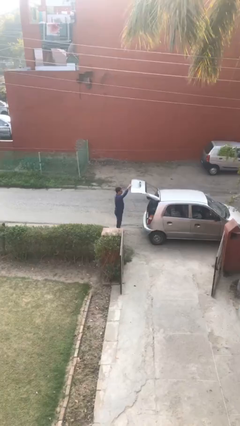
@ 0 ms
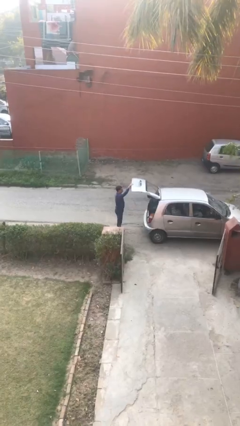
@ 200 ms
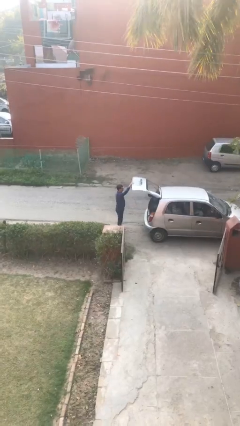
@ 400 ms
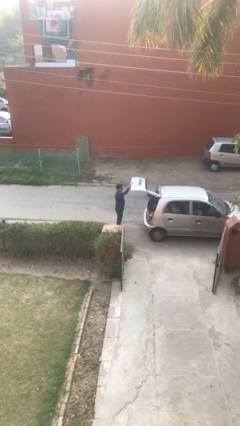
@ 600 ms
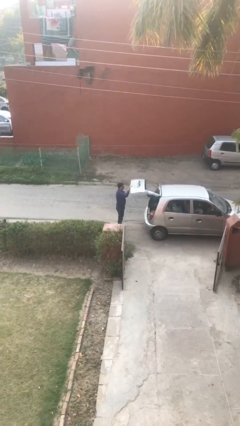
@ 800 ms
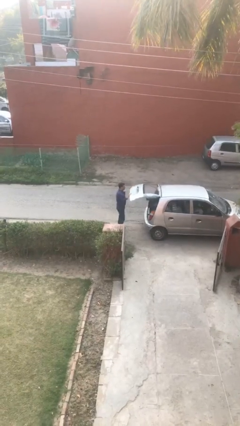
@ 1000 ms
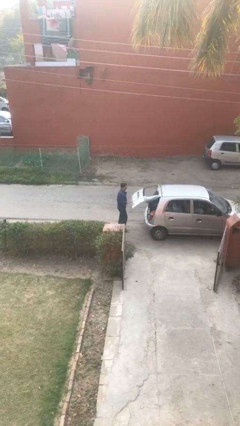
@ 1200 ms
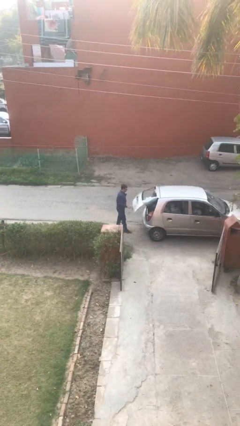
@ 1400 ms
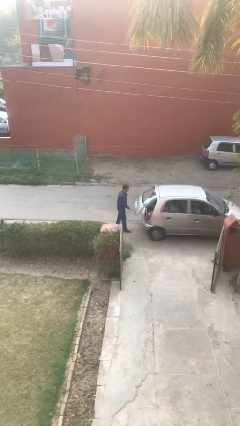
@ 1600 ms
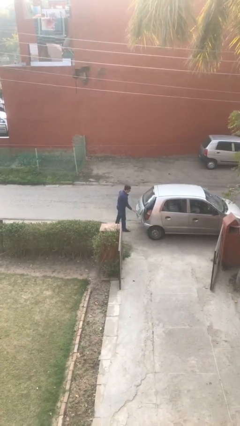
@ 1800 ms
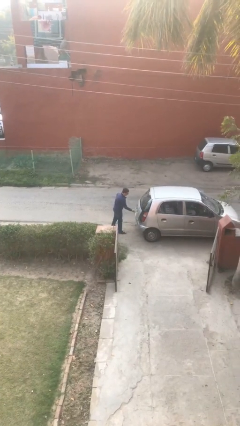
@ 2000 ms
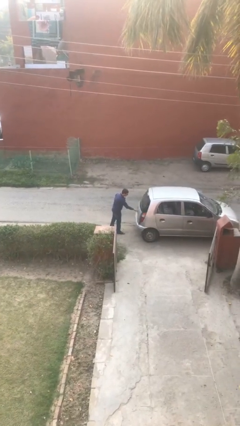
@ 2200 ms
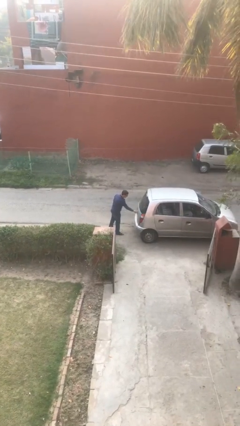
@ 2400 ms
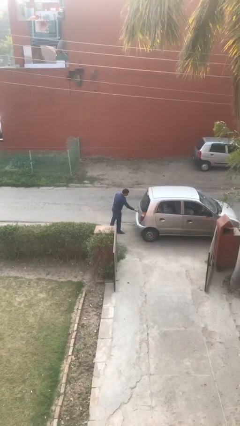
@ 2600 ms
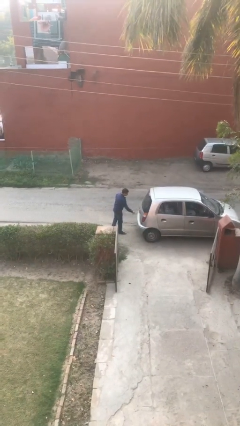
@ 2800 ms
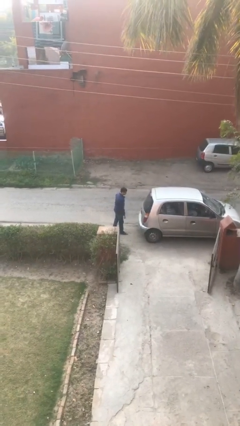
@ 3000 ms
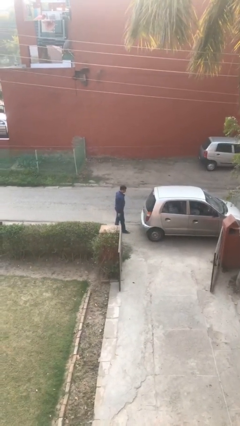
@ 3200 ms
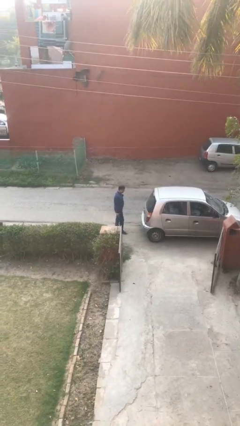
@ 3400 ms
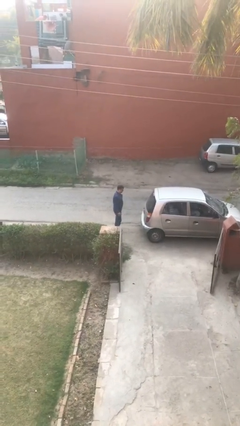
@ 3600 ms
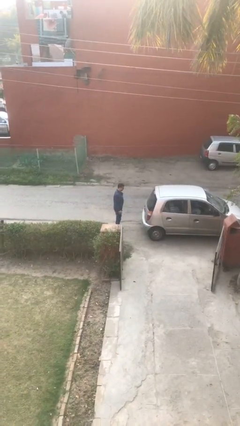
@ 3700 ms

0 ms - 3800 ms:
person closes car trunk

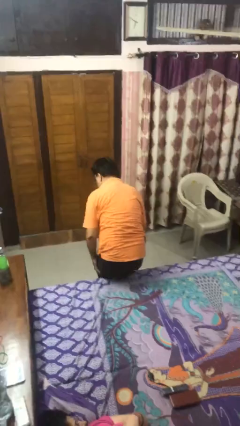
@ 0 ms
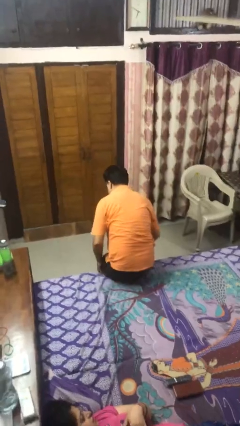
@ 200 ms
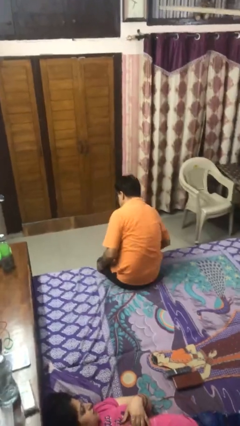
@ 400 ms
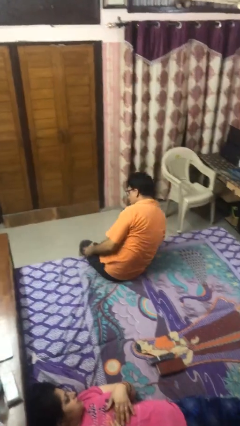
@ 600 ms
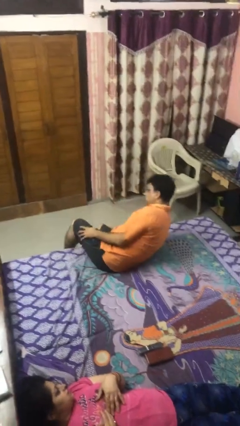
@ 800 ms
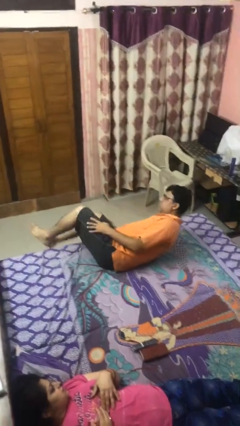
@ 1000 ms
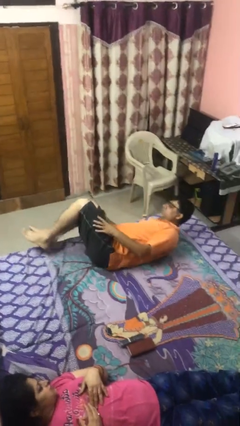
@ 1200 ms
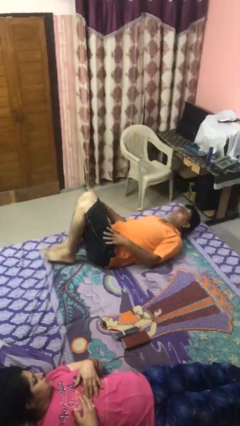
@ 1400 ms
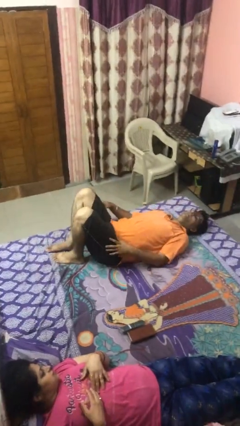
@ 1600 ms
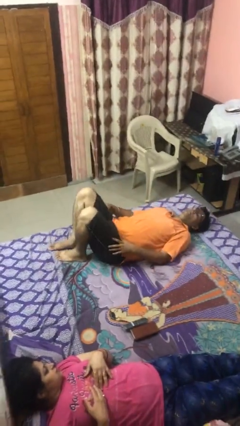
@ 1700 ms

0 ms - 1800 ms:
person lies down on bed

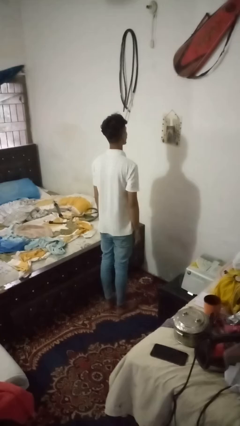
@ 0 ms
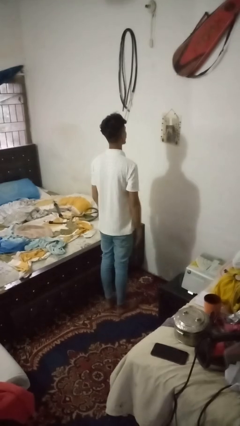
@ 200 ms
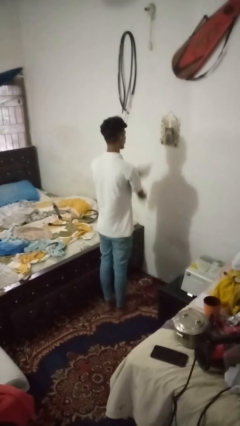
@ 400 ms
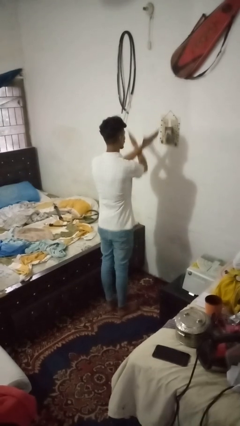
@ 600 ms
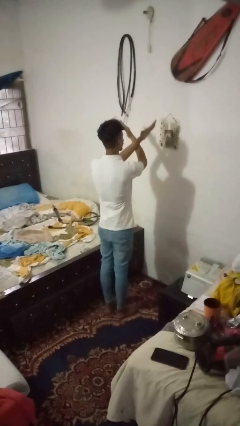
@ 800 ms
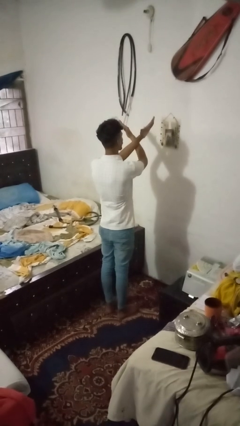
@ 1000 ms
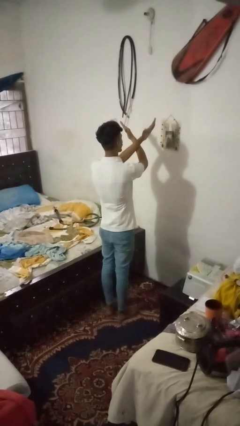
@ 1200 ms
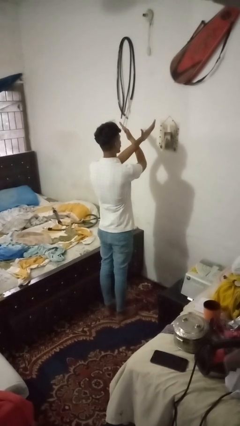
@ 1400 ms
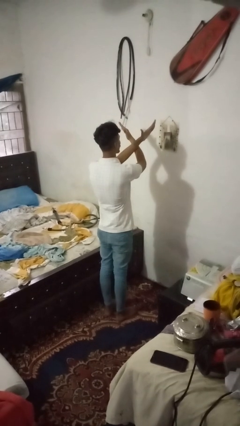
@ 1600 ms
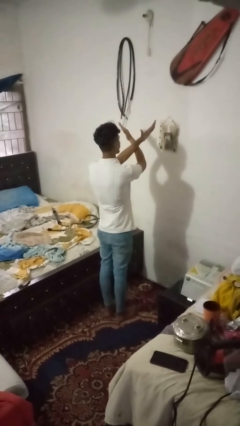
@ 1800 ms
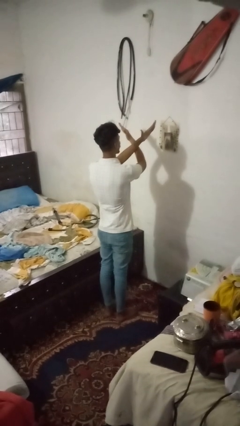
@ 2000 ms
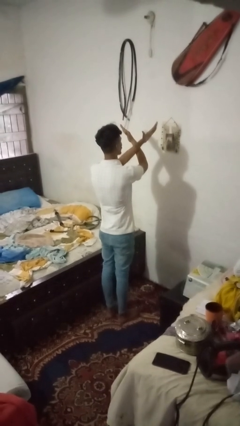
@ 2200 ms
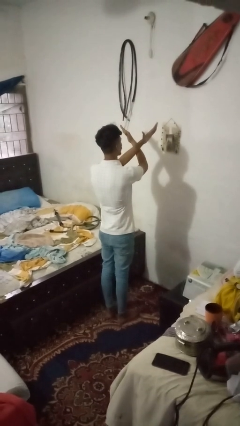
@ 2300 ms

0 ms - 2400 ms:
person gestures arms x

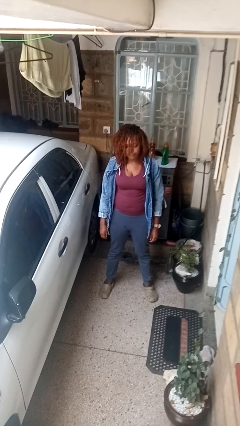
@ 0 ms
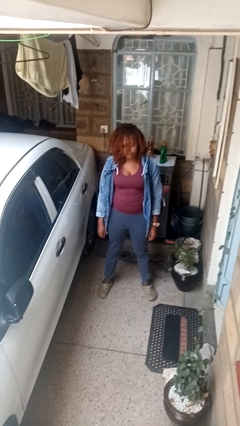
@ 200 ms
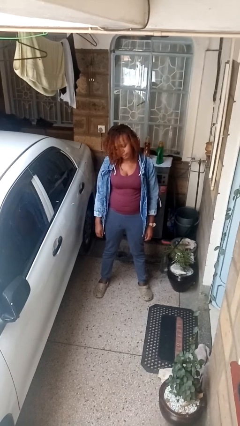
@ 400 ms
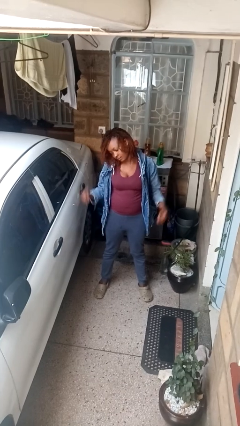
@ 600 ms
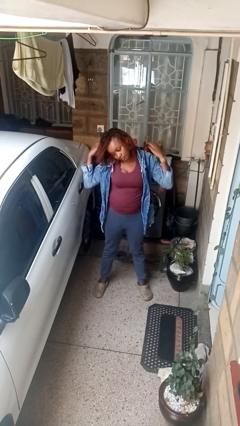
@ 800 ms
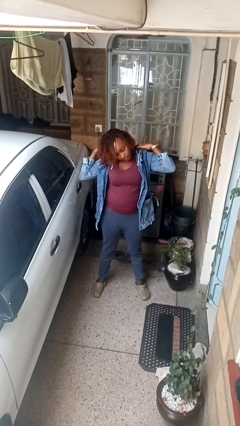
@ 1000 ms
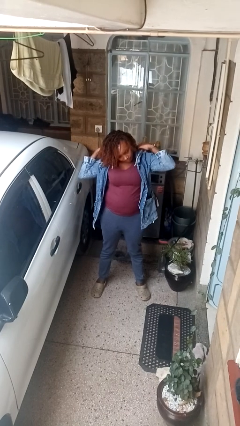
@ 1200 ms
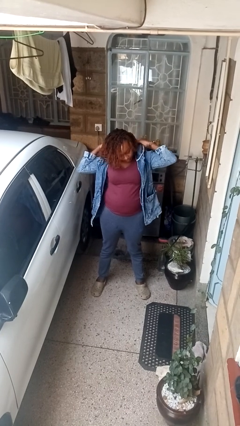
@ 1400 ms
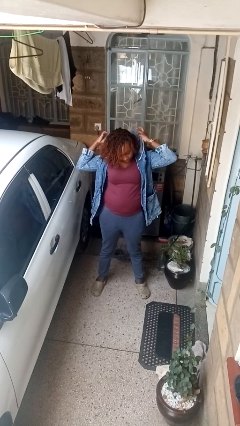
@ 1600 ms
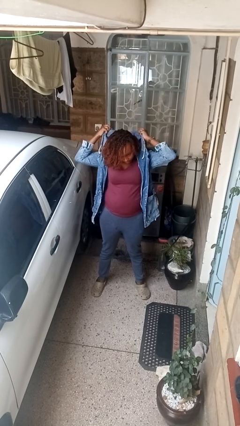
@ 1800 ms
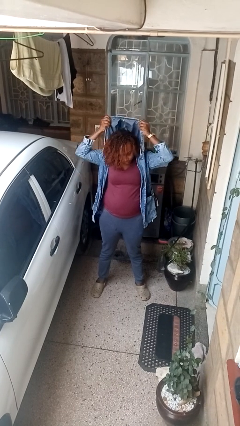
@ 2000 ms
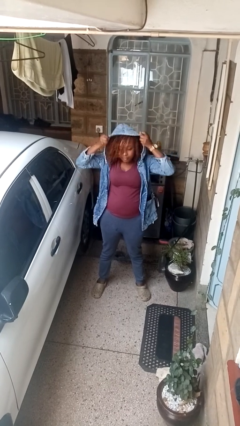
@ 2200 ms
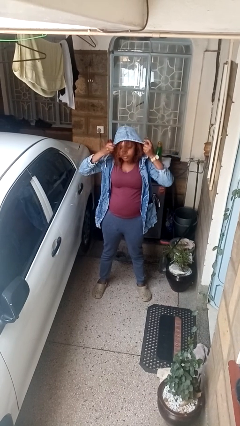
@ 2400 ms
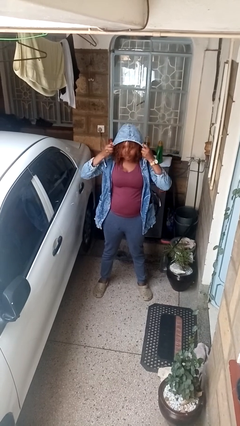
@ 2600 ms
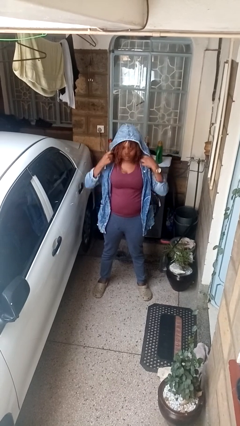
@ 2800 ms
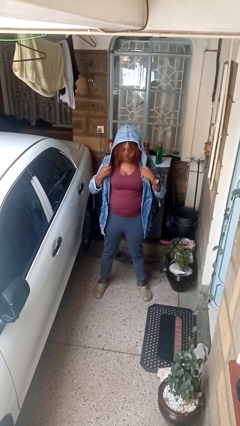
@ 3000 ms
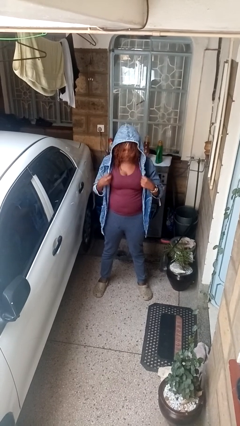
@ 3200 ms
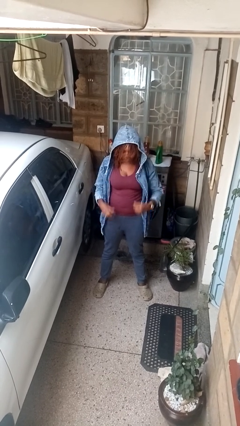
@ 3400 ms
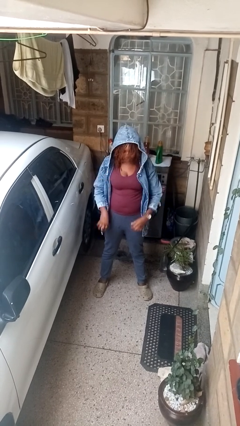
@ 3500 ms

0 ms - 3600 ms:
person puts on hoodie

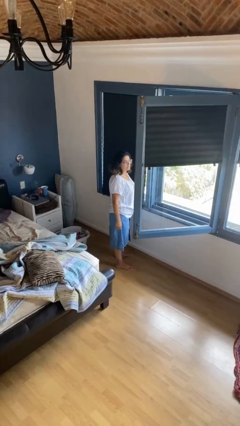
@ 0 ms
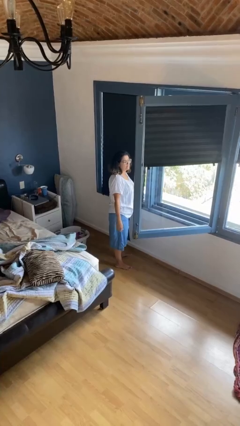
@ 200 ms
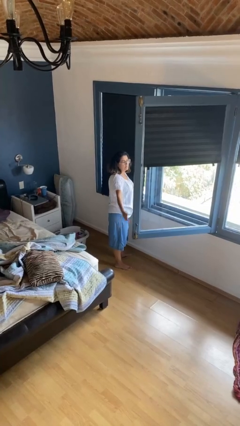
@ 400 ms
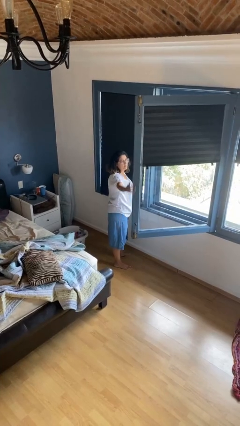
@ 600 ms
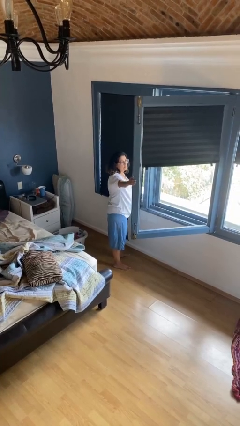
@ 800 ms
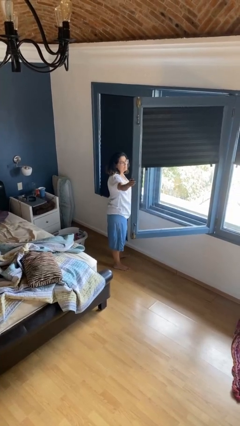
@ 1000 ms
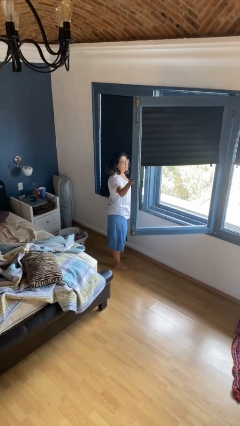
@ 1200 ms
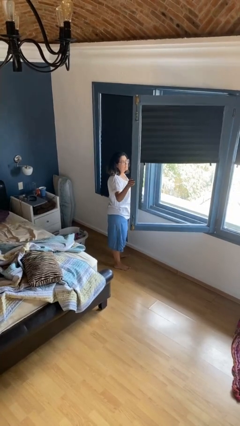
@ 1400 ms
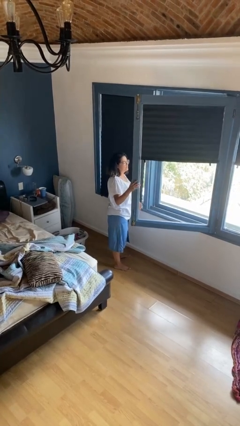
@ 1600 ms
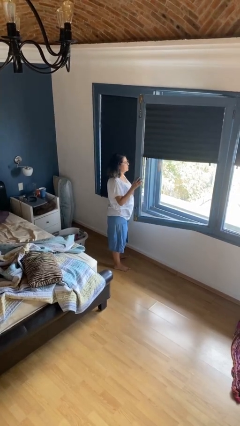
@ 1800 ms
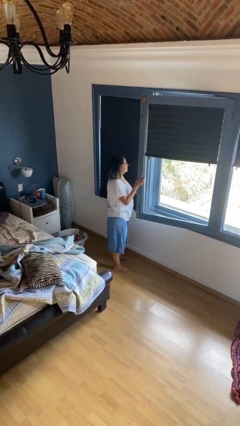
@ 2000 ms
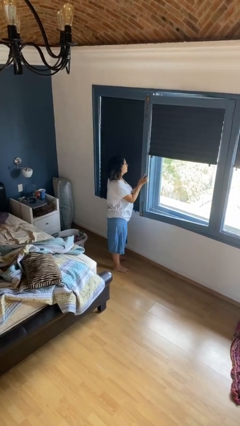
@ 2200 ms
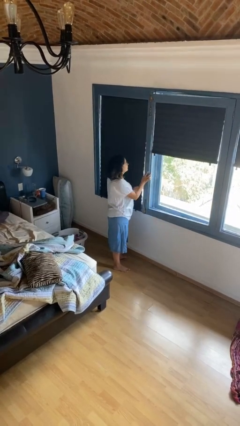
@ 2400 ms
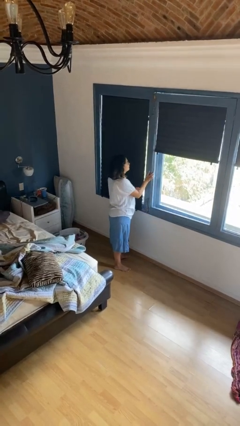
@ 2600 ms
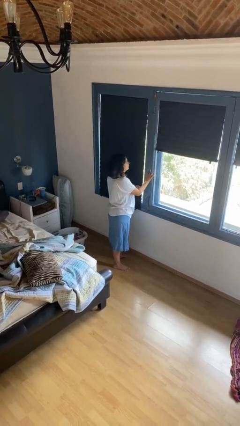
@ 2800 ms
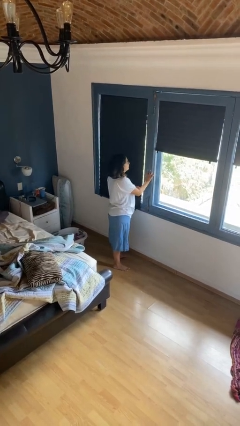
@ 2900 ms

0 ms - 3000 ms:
person closes home window

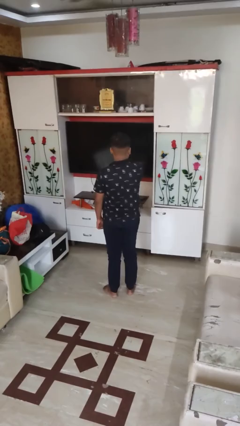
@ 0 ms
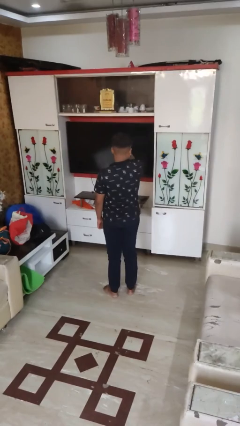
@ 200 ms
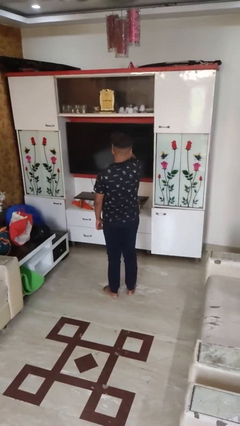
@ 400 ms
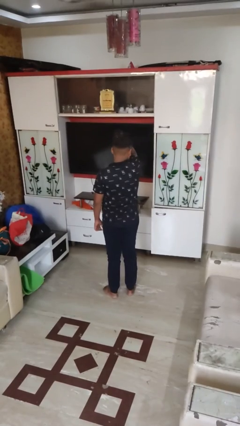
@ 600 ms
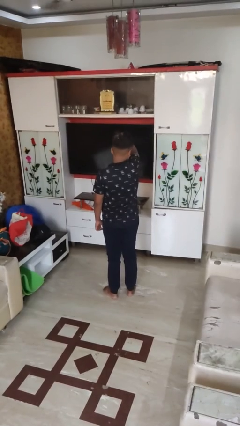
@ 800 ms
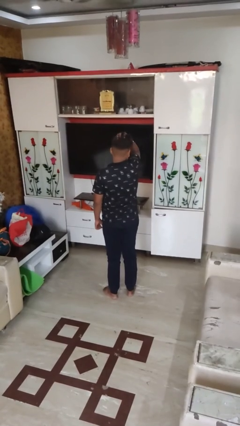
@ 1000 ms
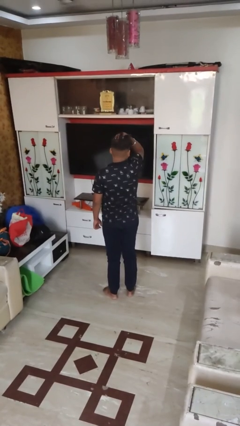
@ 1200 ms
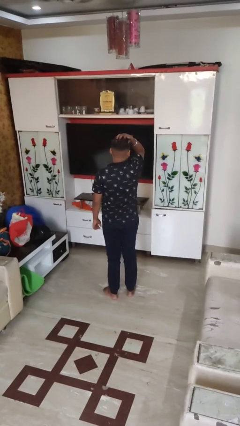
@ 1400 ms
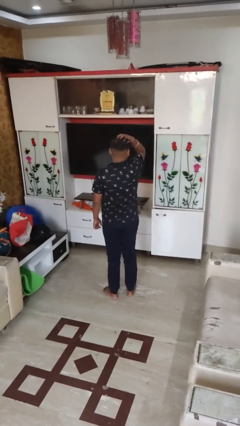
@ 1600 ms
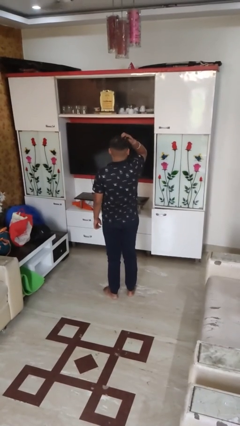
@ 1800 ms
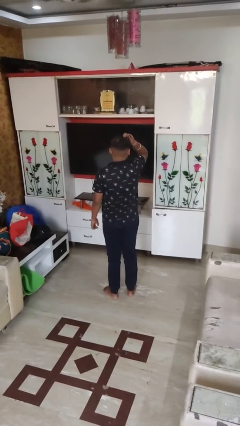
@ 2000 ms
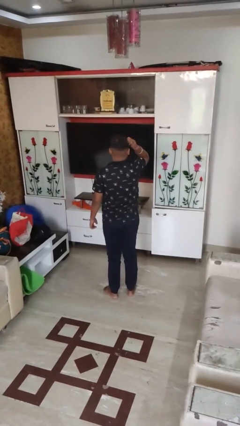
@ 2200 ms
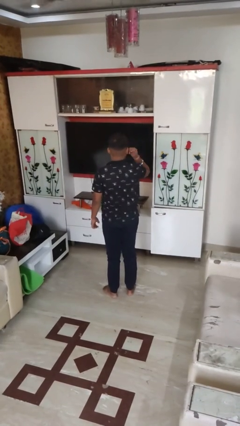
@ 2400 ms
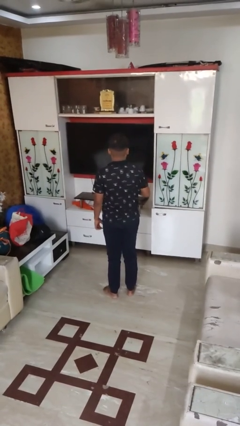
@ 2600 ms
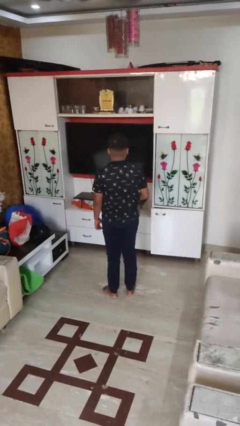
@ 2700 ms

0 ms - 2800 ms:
person strokes hair
